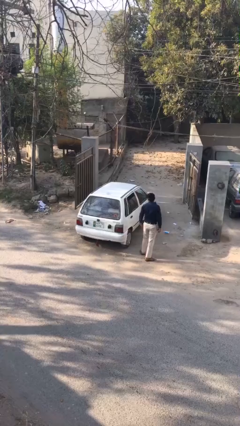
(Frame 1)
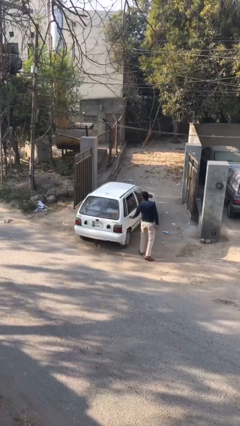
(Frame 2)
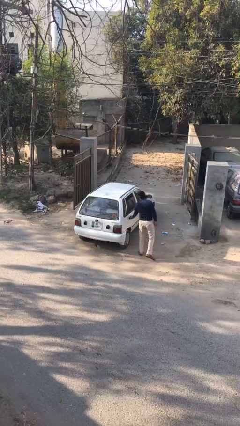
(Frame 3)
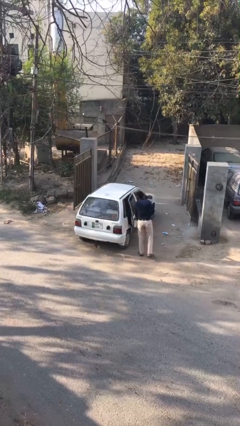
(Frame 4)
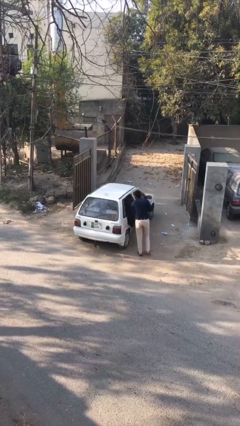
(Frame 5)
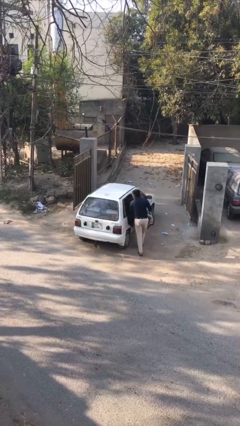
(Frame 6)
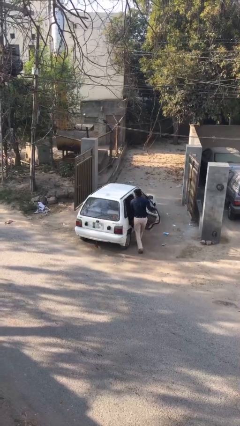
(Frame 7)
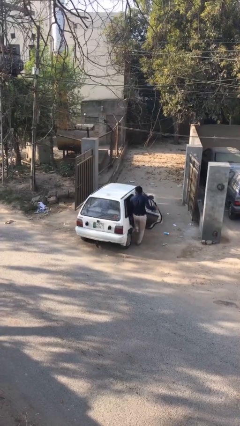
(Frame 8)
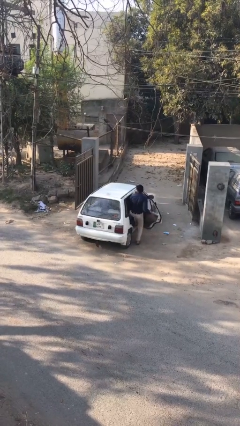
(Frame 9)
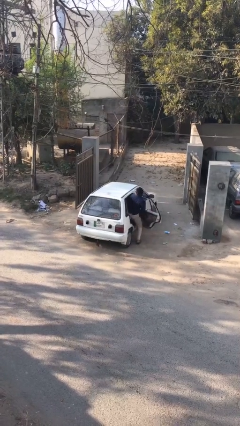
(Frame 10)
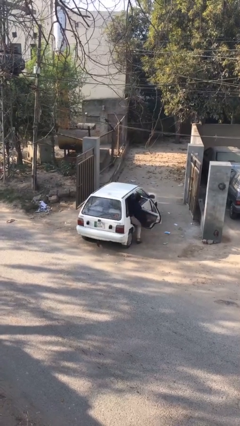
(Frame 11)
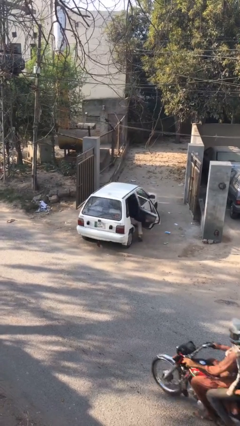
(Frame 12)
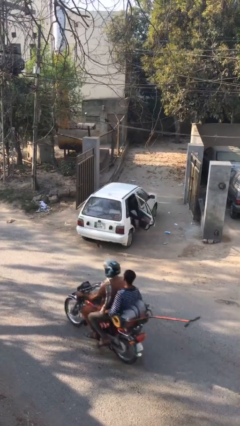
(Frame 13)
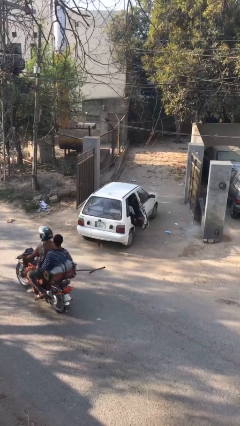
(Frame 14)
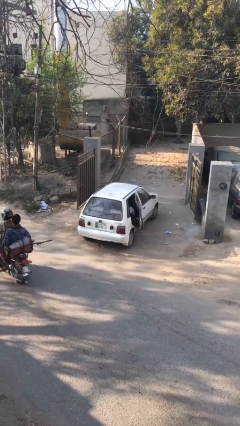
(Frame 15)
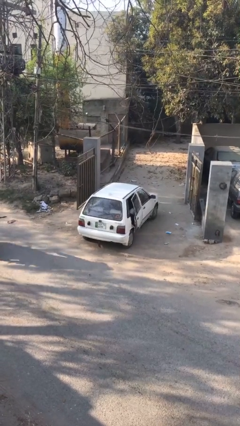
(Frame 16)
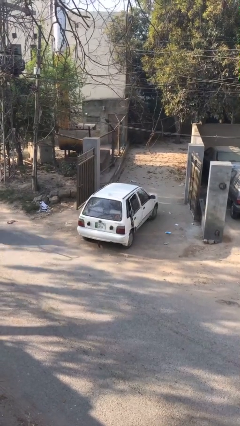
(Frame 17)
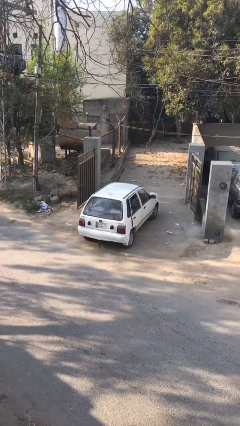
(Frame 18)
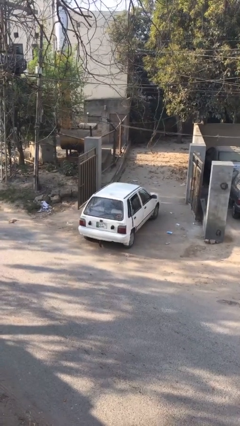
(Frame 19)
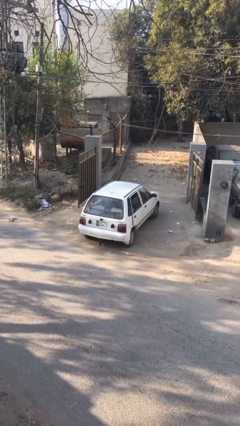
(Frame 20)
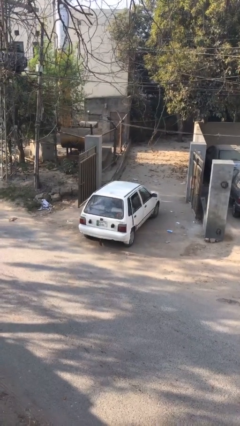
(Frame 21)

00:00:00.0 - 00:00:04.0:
car picks up person

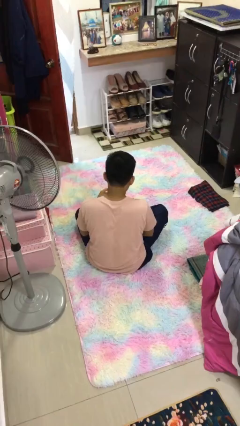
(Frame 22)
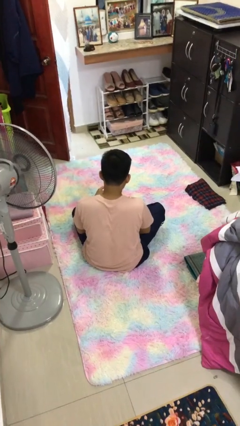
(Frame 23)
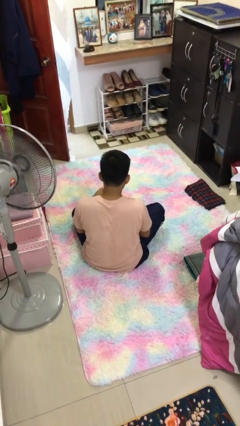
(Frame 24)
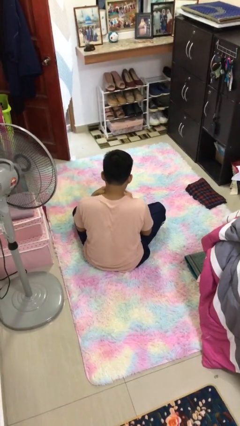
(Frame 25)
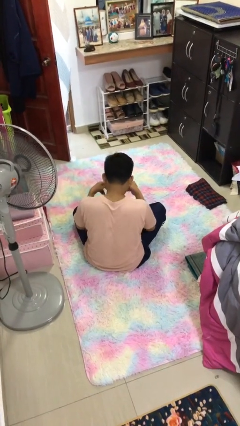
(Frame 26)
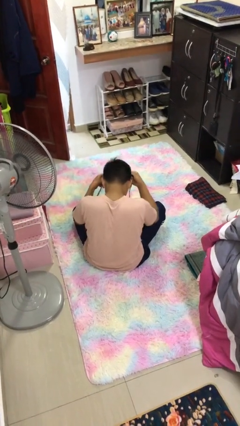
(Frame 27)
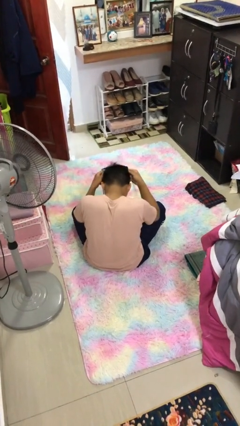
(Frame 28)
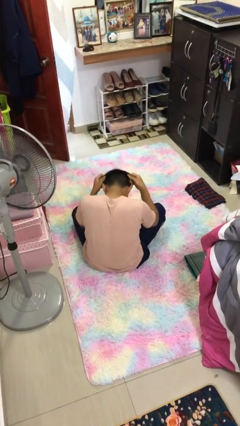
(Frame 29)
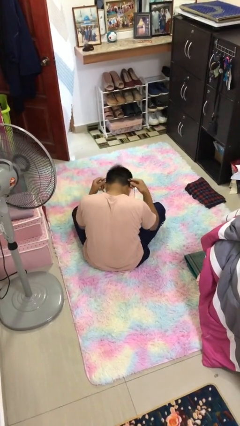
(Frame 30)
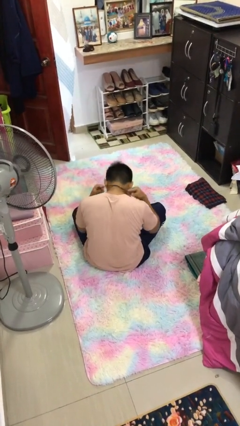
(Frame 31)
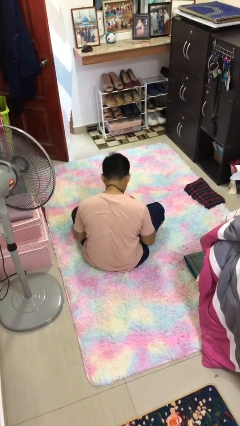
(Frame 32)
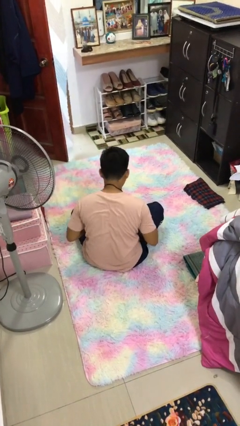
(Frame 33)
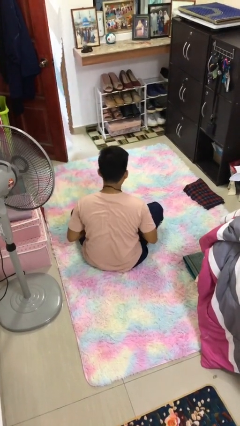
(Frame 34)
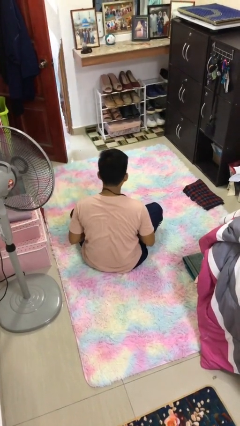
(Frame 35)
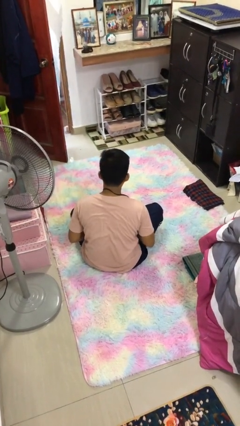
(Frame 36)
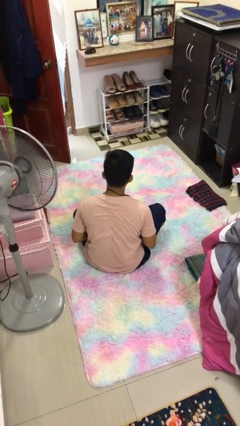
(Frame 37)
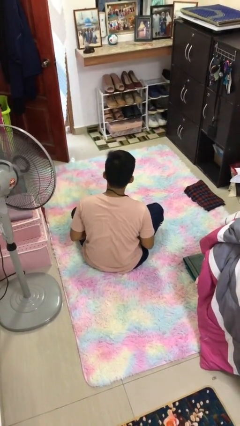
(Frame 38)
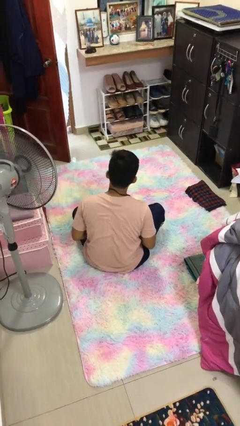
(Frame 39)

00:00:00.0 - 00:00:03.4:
person puts on necklace

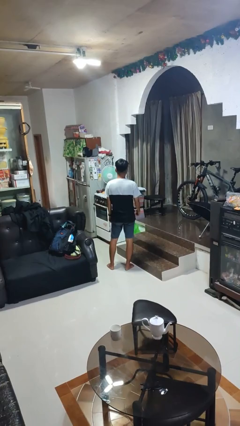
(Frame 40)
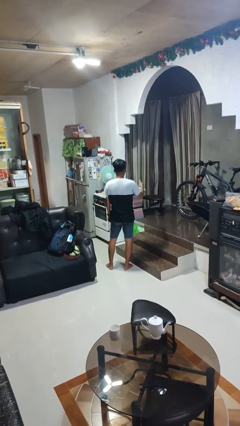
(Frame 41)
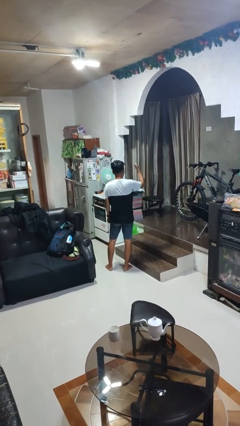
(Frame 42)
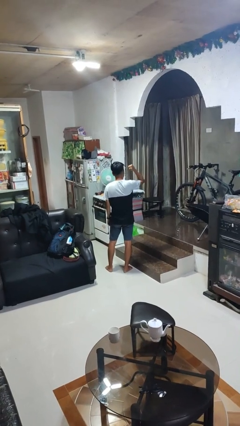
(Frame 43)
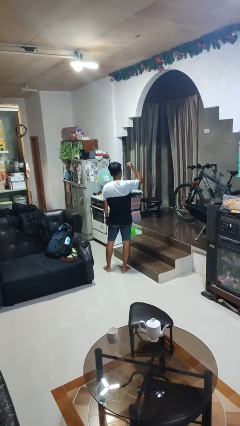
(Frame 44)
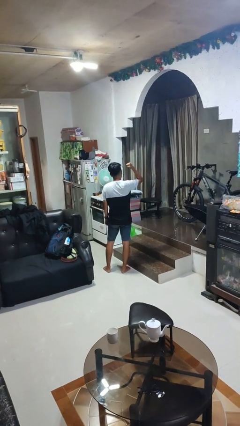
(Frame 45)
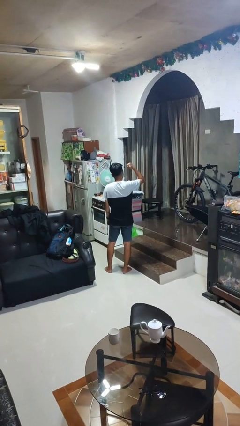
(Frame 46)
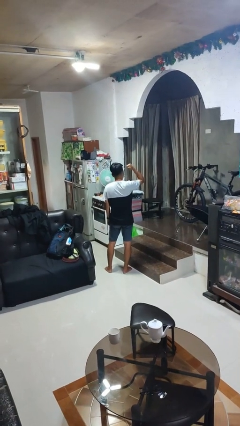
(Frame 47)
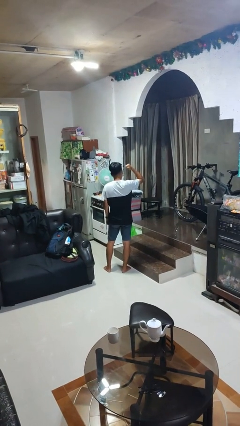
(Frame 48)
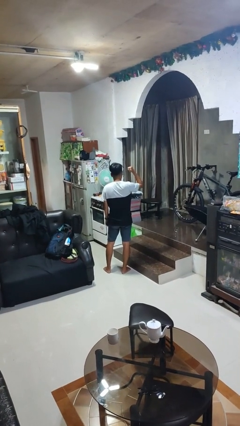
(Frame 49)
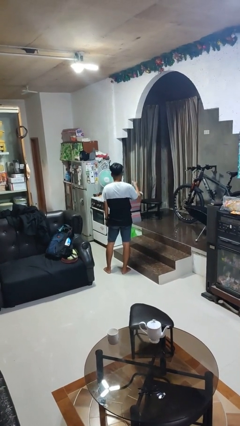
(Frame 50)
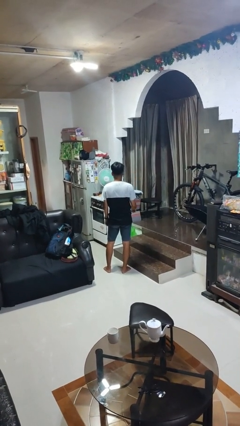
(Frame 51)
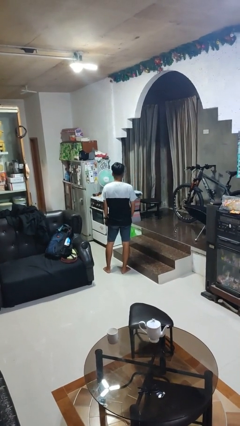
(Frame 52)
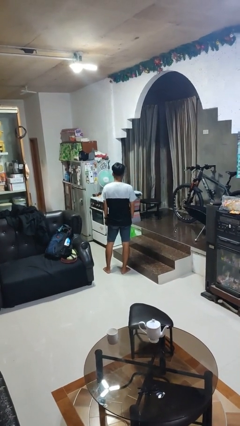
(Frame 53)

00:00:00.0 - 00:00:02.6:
person gestures behind me

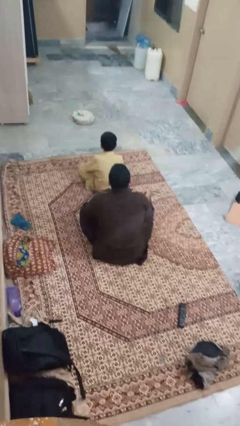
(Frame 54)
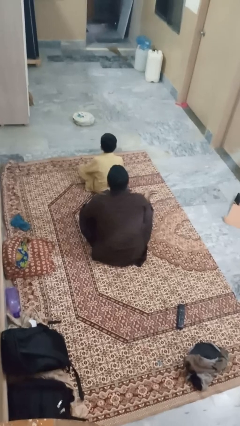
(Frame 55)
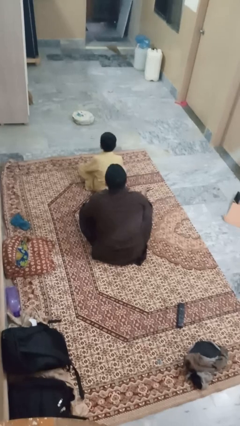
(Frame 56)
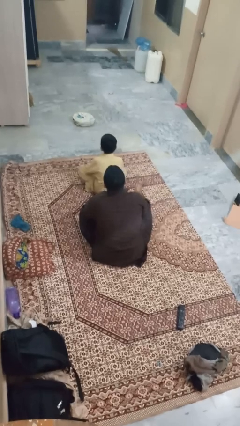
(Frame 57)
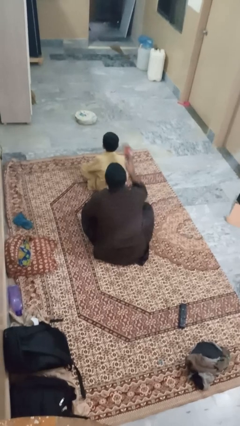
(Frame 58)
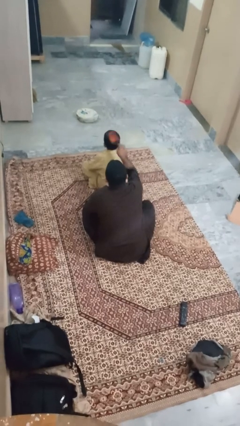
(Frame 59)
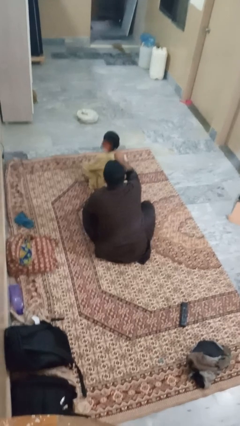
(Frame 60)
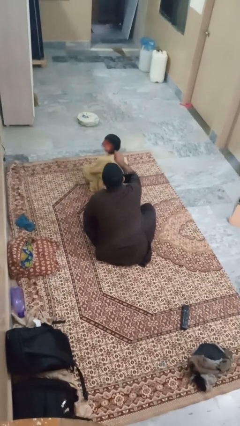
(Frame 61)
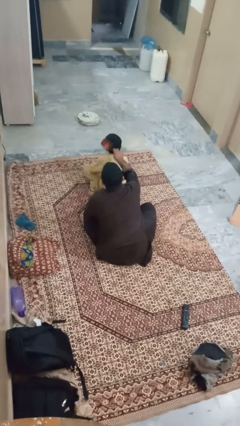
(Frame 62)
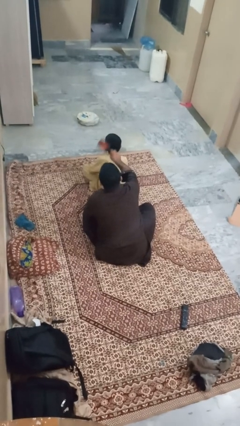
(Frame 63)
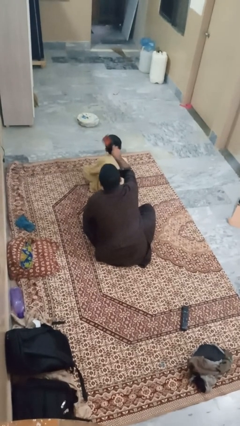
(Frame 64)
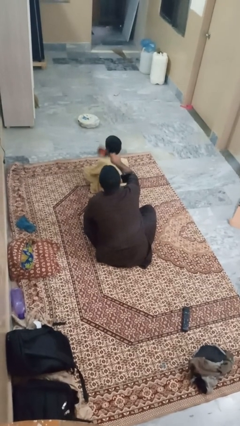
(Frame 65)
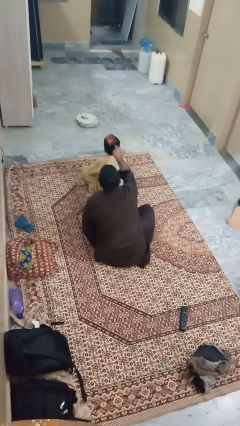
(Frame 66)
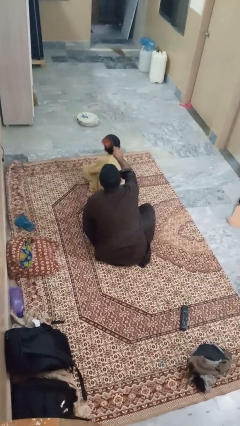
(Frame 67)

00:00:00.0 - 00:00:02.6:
person brushes hair of person

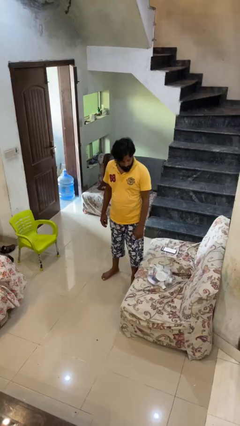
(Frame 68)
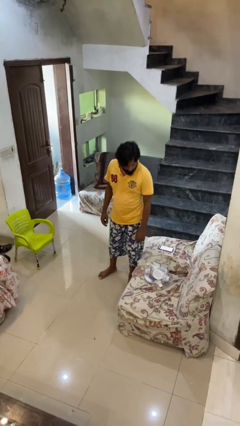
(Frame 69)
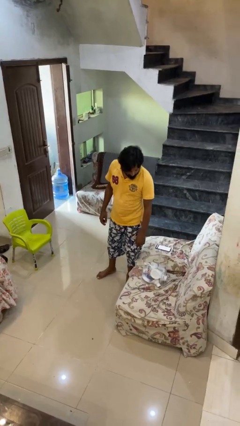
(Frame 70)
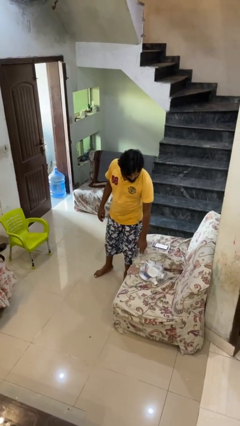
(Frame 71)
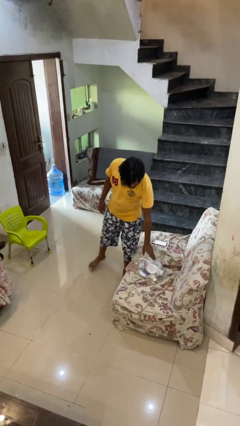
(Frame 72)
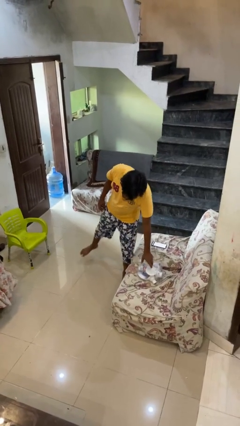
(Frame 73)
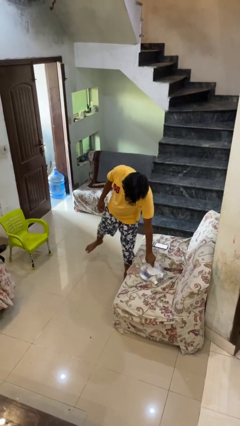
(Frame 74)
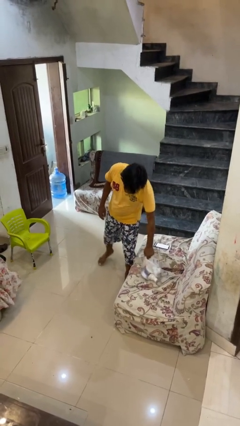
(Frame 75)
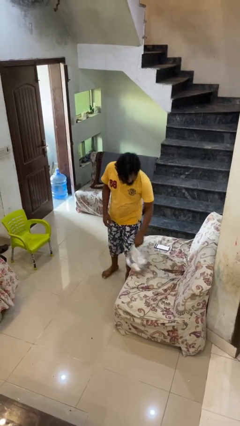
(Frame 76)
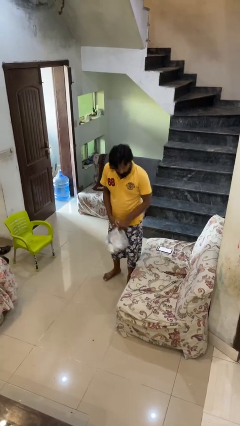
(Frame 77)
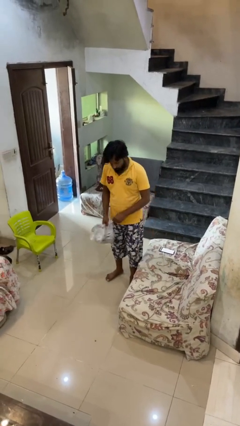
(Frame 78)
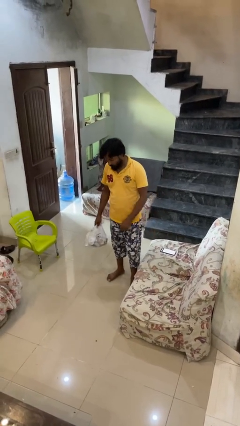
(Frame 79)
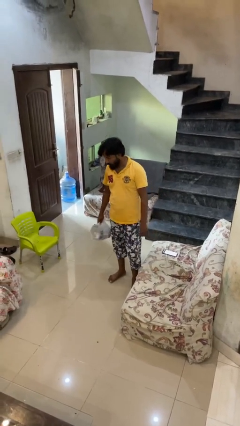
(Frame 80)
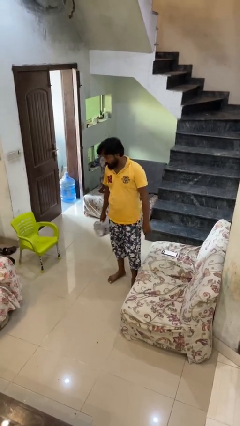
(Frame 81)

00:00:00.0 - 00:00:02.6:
person picks up object from couch

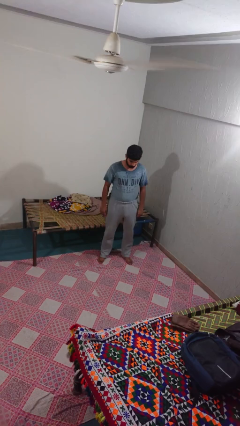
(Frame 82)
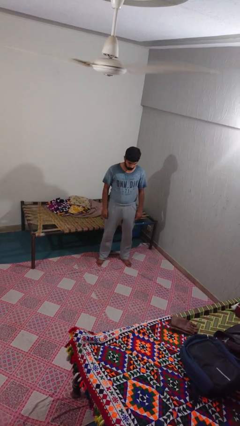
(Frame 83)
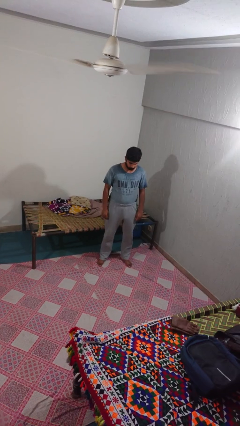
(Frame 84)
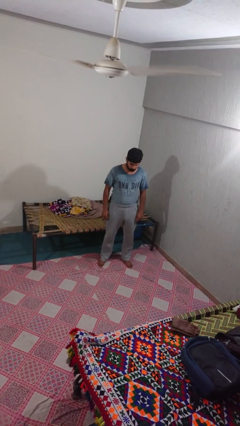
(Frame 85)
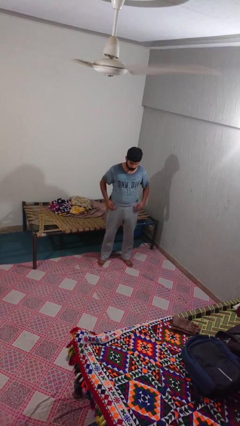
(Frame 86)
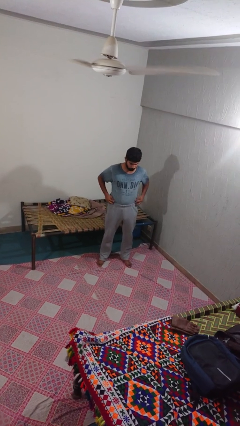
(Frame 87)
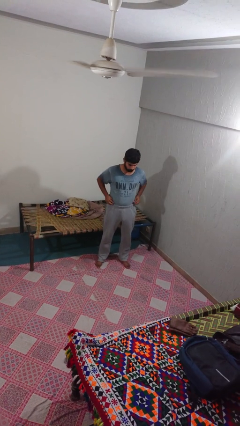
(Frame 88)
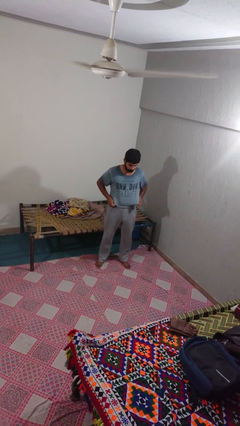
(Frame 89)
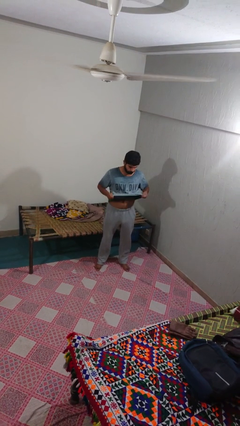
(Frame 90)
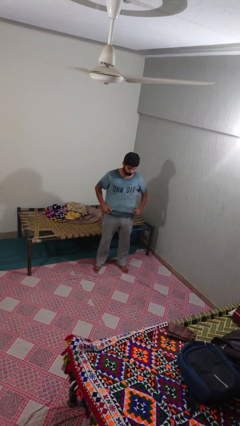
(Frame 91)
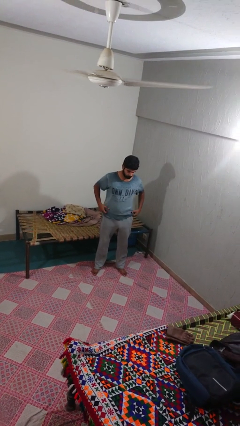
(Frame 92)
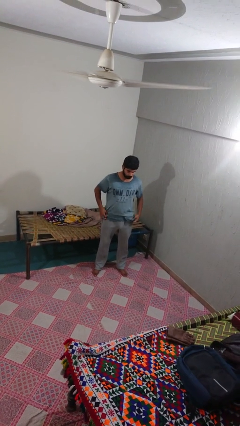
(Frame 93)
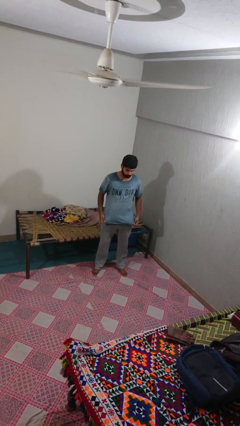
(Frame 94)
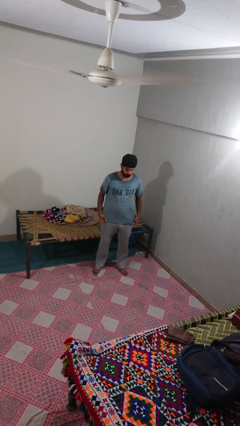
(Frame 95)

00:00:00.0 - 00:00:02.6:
person untucks shirt
